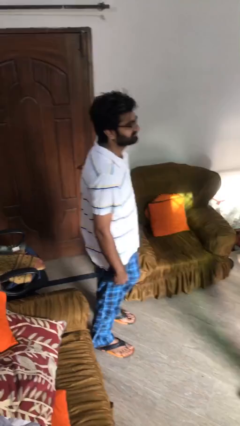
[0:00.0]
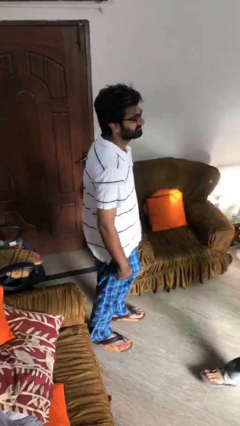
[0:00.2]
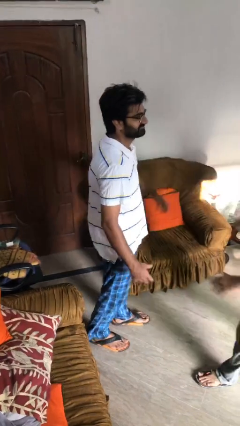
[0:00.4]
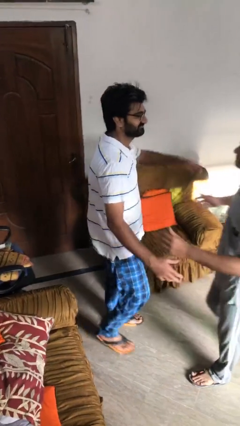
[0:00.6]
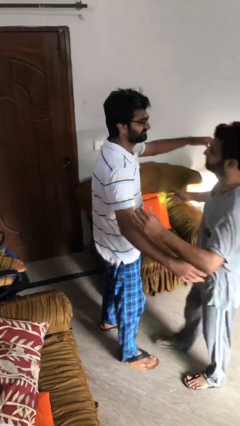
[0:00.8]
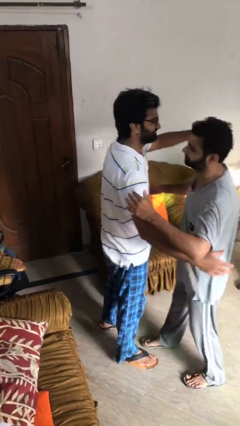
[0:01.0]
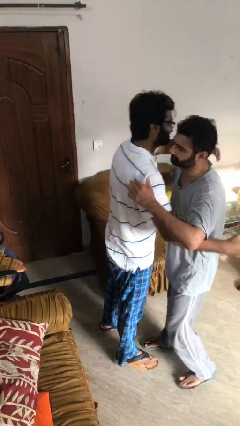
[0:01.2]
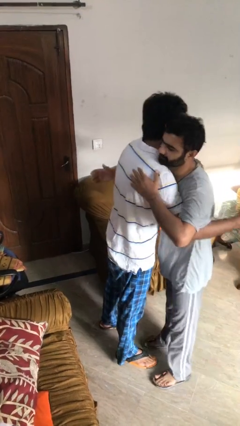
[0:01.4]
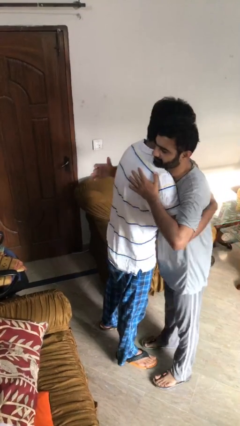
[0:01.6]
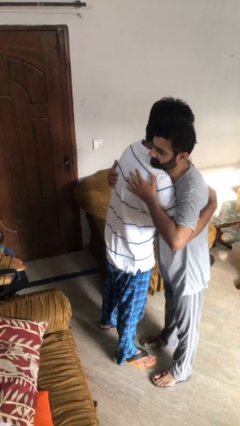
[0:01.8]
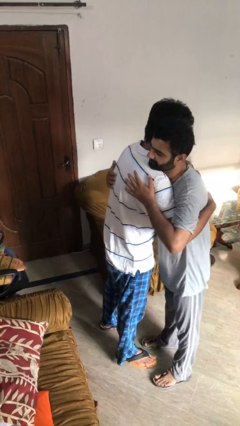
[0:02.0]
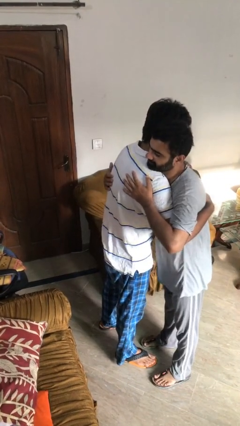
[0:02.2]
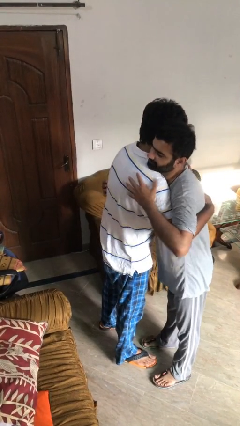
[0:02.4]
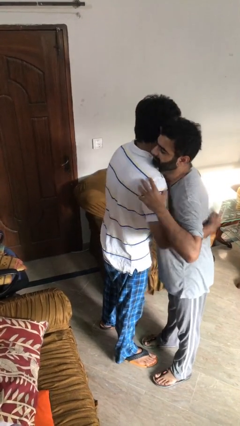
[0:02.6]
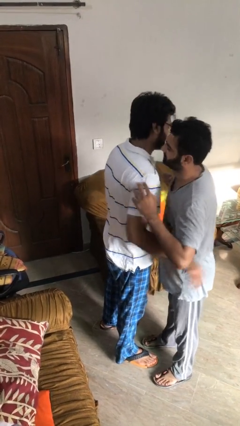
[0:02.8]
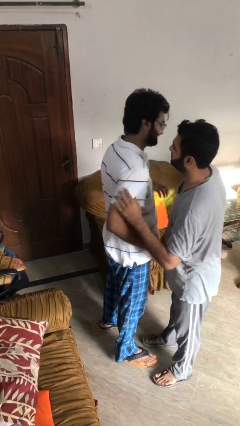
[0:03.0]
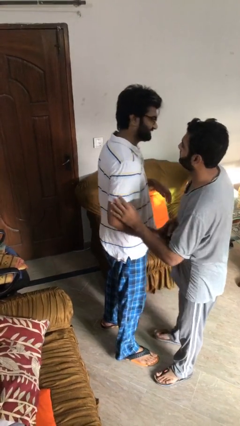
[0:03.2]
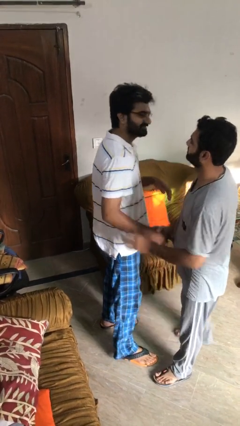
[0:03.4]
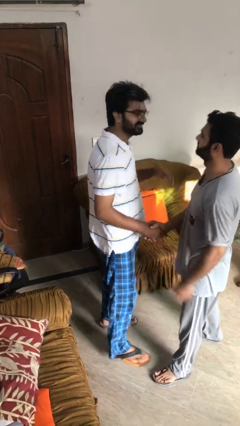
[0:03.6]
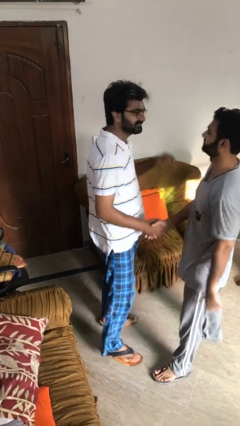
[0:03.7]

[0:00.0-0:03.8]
person embraces person

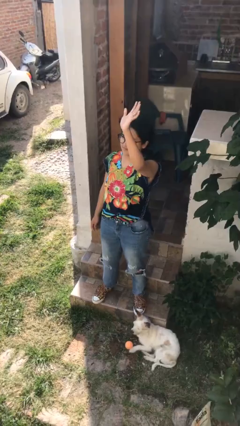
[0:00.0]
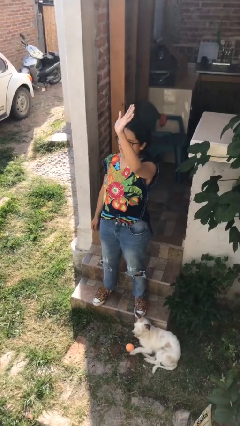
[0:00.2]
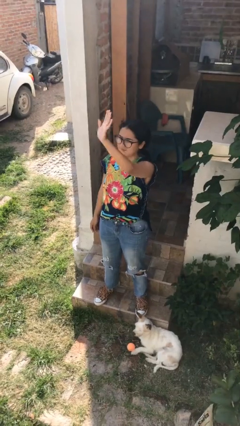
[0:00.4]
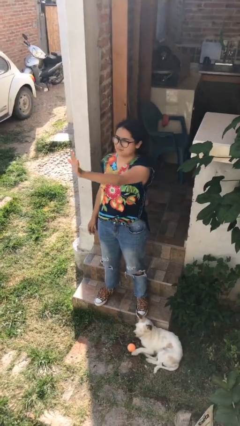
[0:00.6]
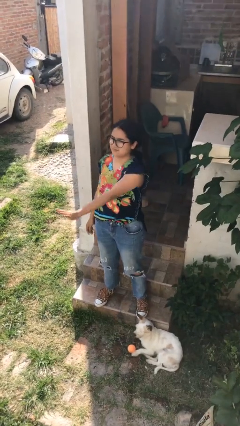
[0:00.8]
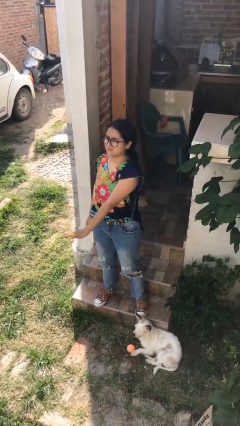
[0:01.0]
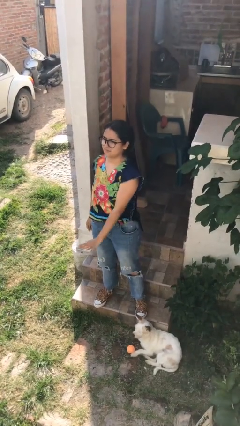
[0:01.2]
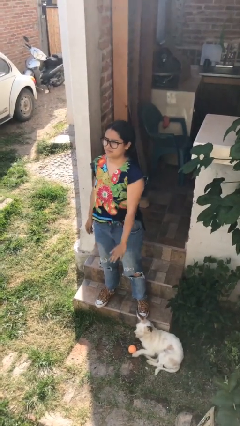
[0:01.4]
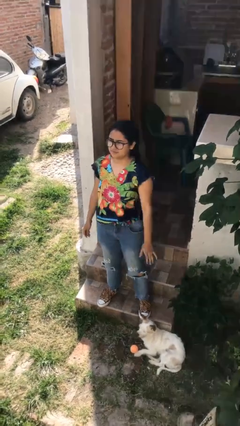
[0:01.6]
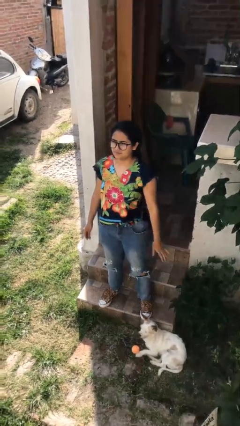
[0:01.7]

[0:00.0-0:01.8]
person gestures swipe down

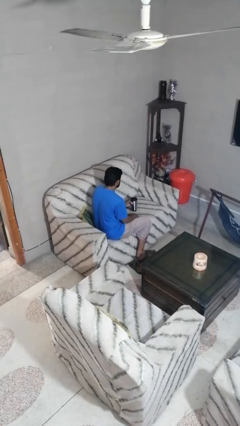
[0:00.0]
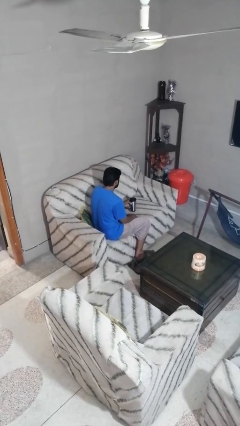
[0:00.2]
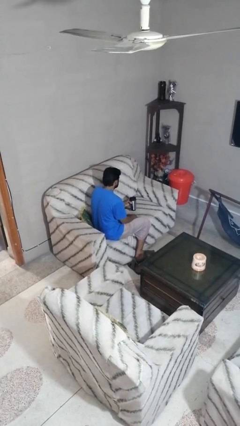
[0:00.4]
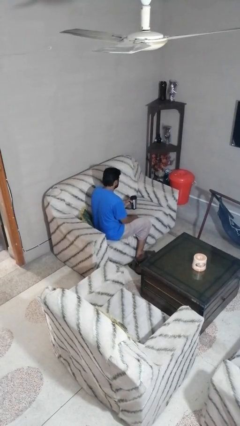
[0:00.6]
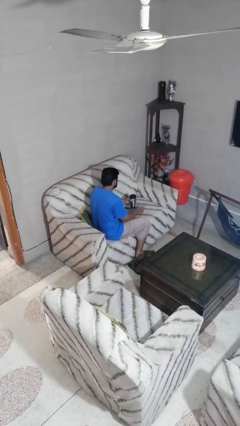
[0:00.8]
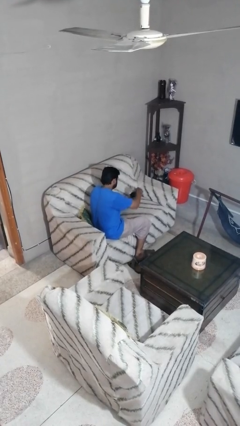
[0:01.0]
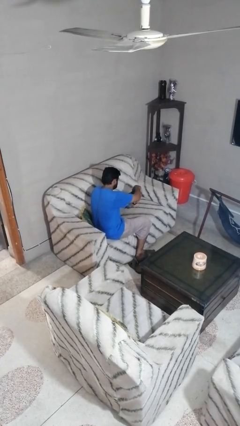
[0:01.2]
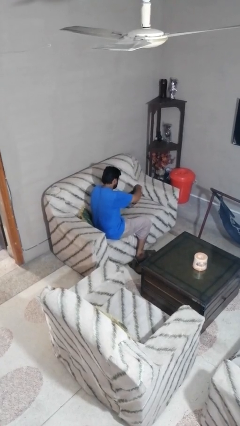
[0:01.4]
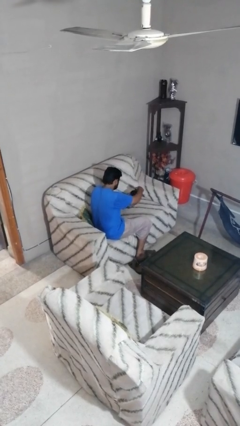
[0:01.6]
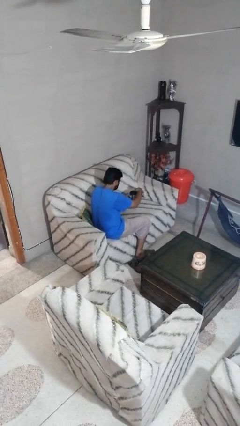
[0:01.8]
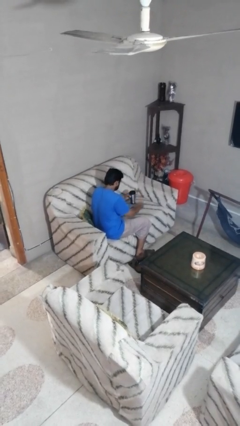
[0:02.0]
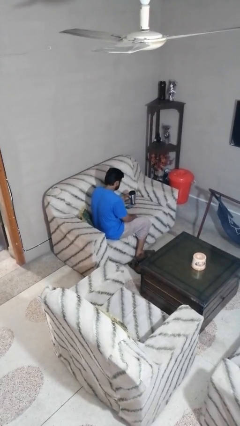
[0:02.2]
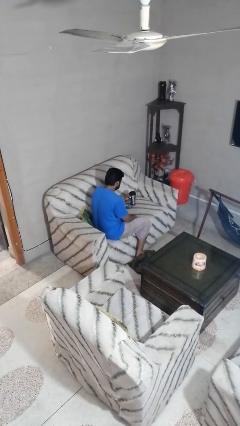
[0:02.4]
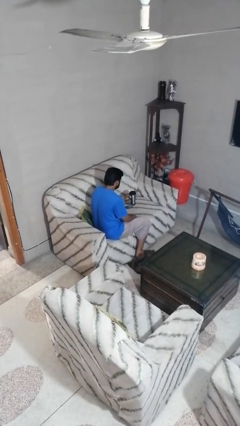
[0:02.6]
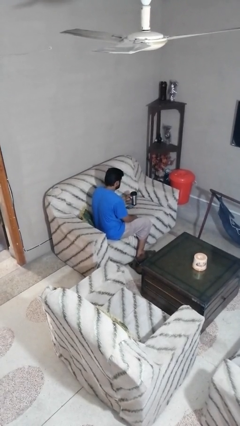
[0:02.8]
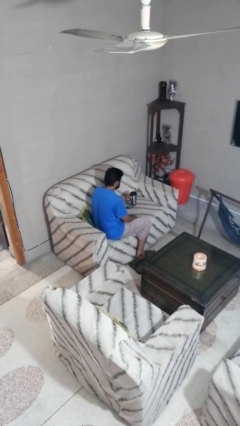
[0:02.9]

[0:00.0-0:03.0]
person opens beverage can

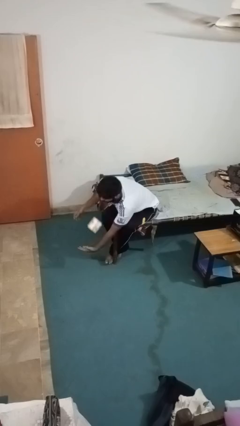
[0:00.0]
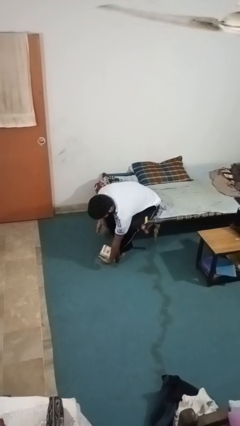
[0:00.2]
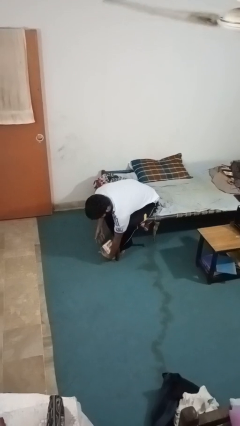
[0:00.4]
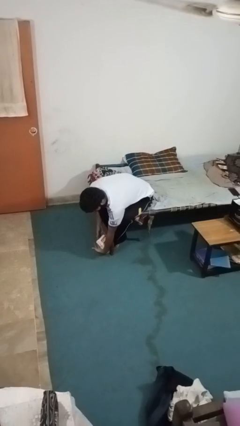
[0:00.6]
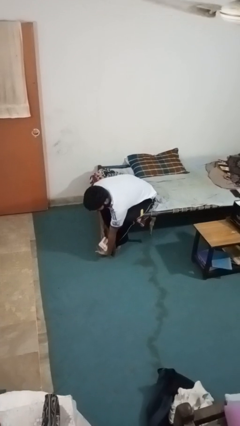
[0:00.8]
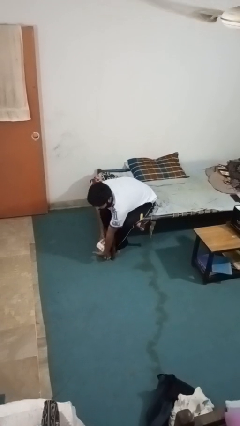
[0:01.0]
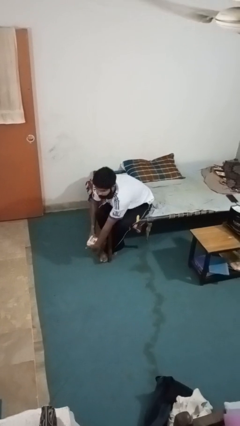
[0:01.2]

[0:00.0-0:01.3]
person catches dropped object

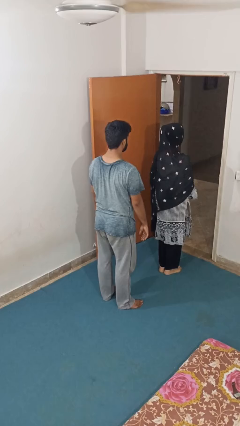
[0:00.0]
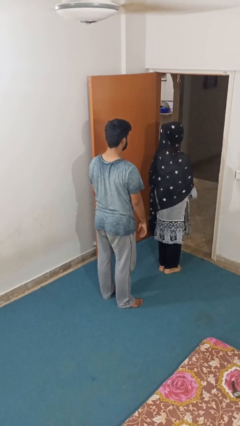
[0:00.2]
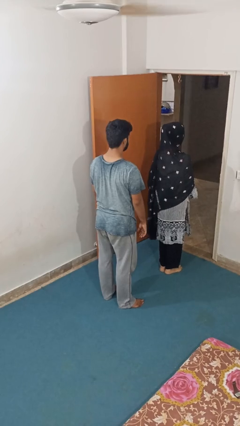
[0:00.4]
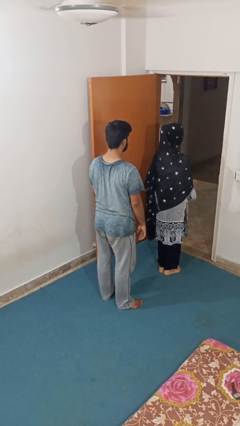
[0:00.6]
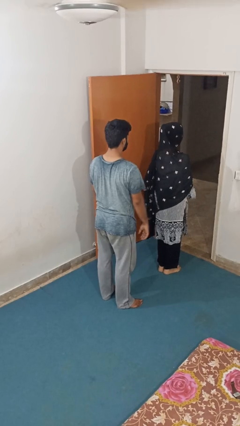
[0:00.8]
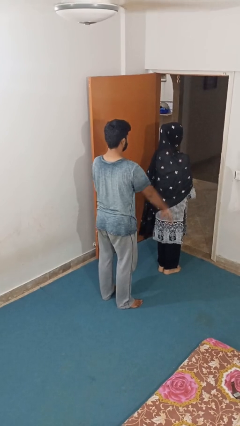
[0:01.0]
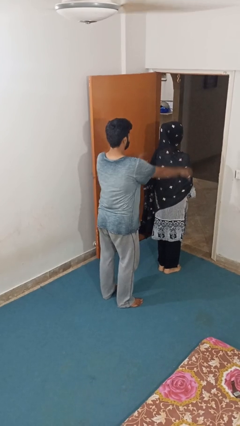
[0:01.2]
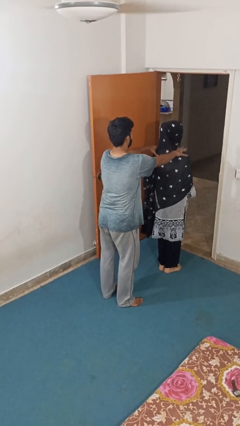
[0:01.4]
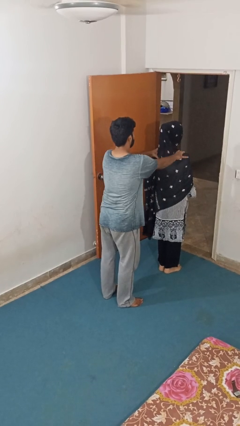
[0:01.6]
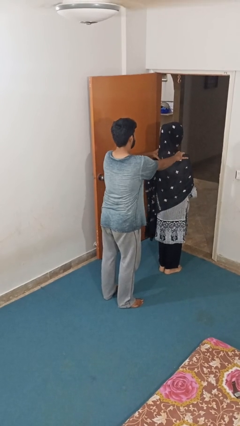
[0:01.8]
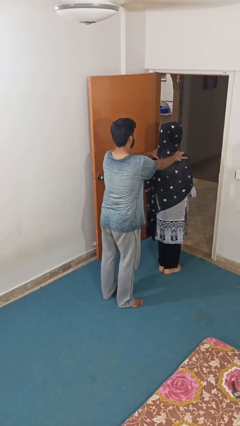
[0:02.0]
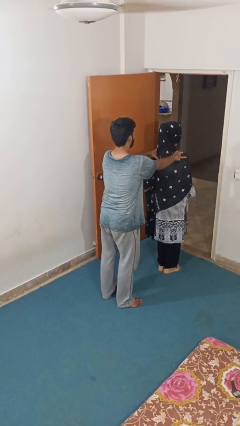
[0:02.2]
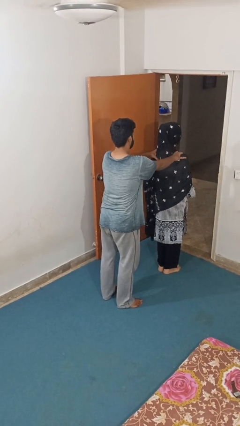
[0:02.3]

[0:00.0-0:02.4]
person grabs person by shoulder

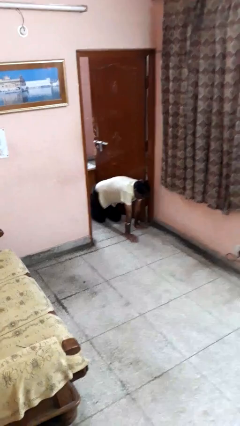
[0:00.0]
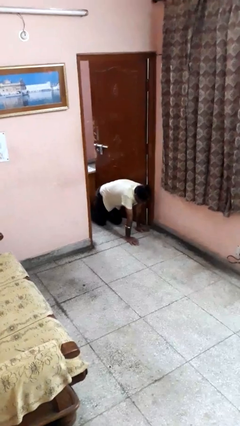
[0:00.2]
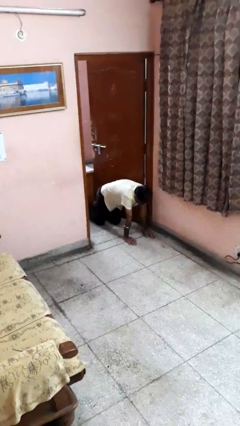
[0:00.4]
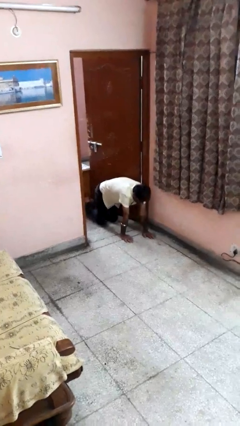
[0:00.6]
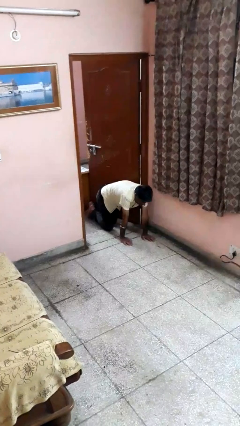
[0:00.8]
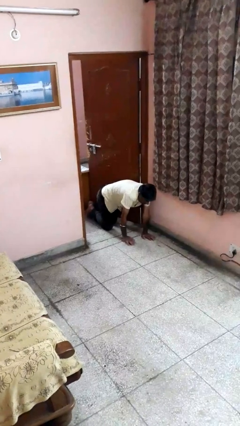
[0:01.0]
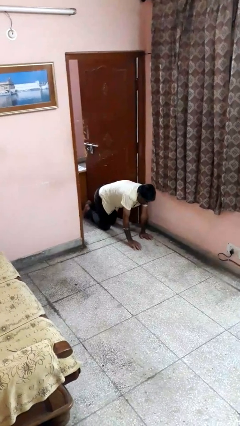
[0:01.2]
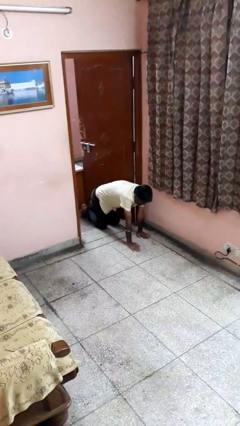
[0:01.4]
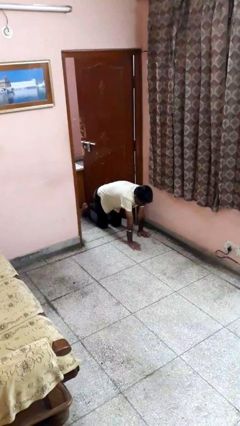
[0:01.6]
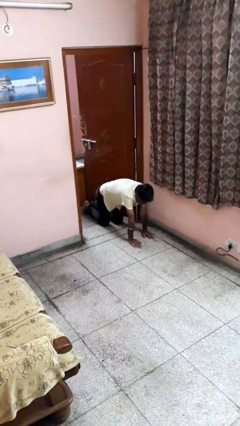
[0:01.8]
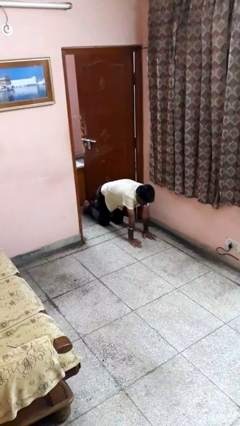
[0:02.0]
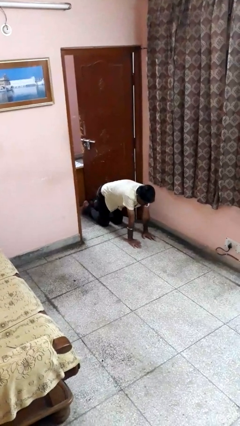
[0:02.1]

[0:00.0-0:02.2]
person crawls

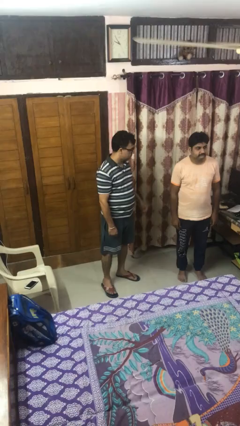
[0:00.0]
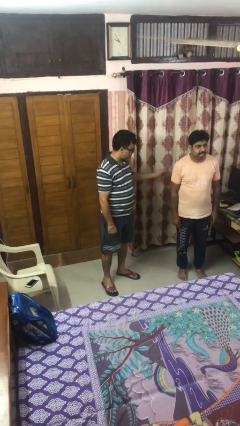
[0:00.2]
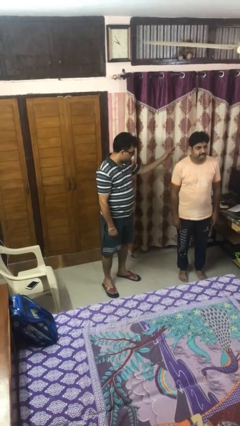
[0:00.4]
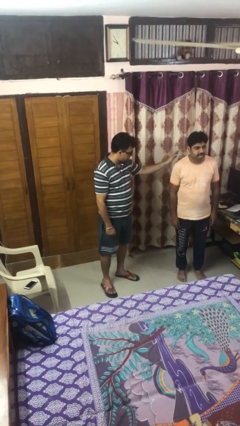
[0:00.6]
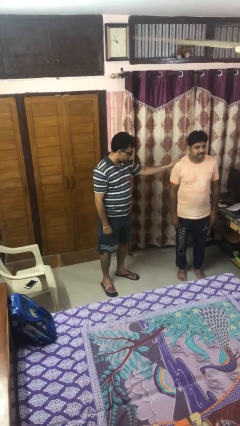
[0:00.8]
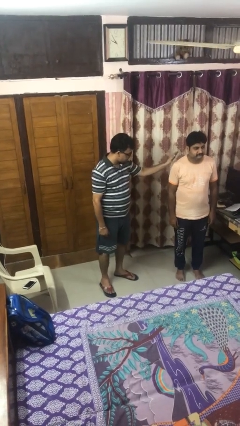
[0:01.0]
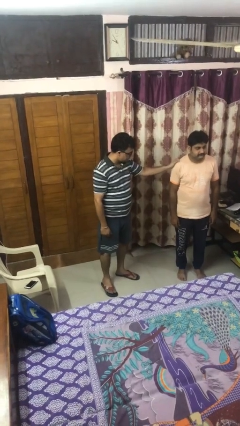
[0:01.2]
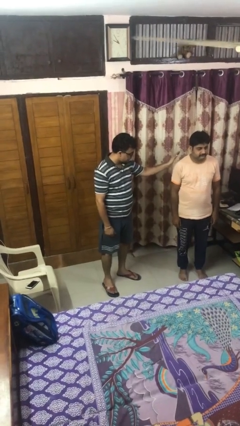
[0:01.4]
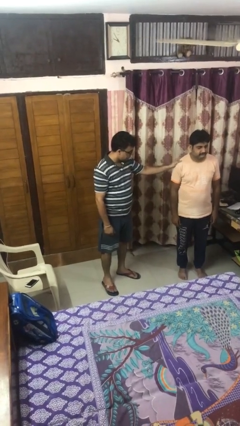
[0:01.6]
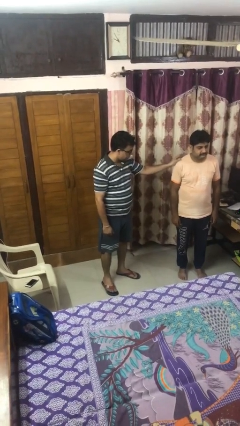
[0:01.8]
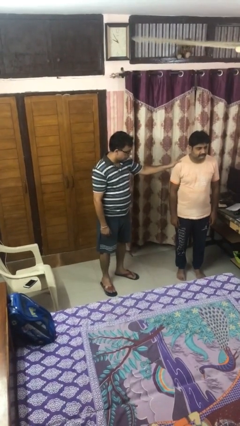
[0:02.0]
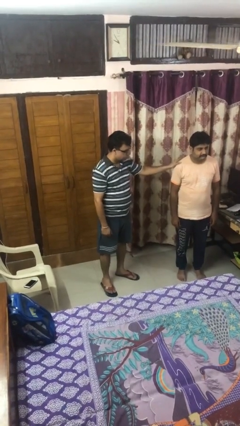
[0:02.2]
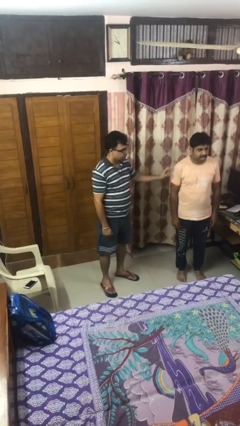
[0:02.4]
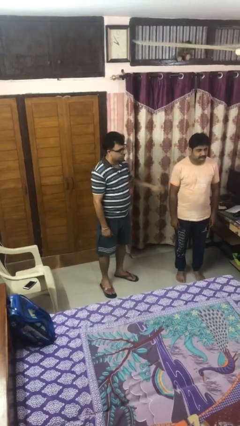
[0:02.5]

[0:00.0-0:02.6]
person pounds shoulders of person
